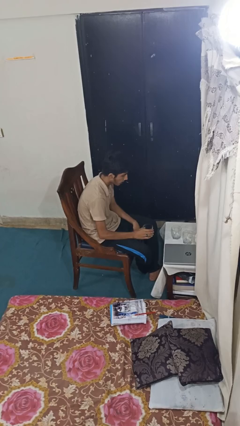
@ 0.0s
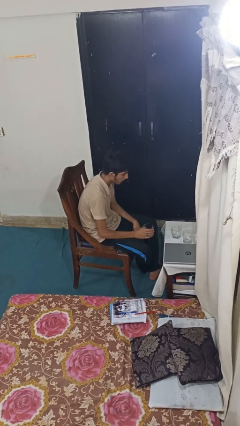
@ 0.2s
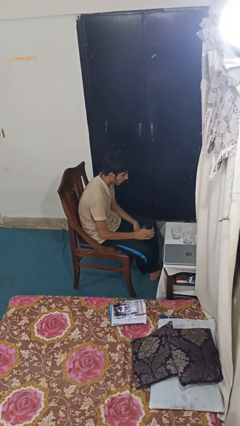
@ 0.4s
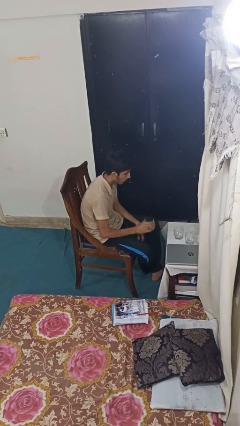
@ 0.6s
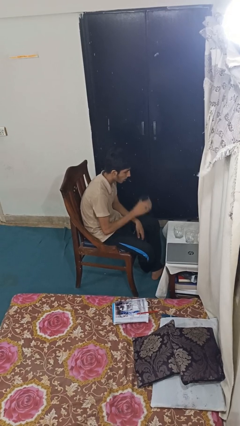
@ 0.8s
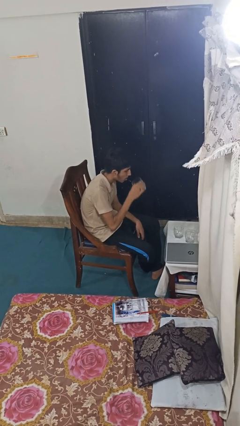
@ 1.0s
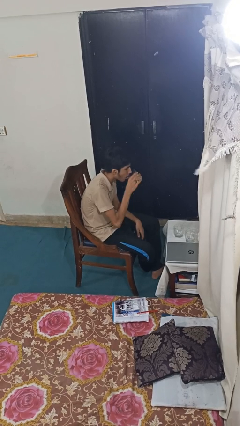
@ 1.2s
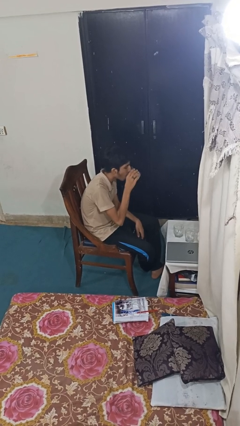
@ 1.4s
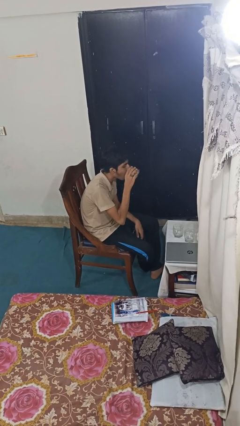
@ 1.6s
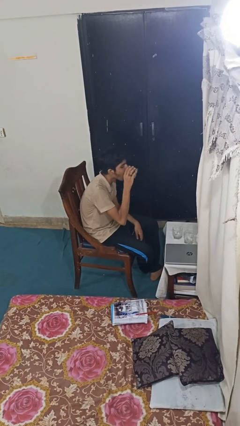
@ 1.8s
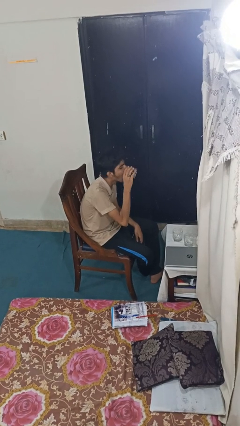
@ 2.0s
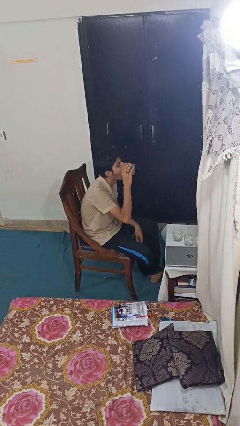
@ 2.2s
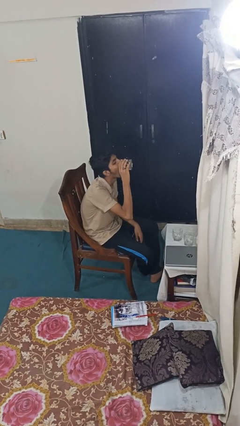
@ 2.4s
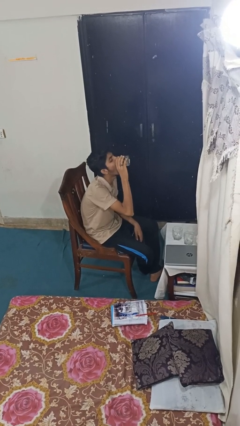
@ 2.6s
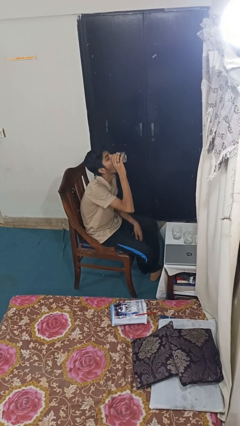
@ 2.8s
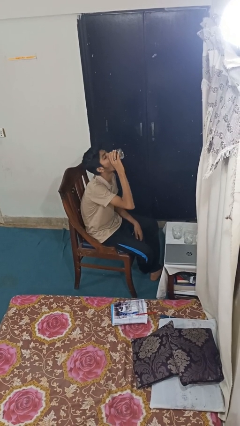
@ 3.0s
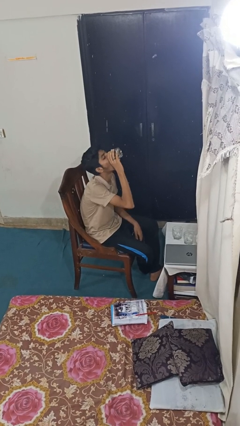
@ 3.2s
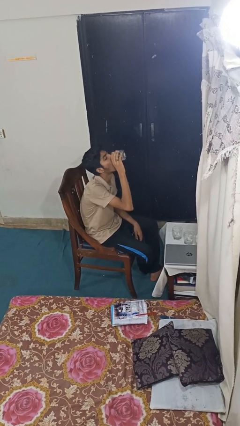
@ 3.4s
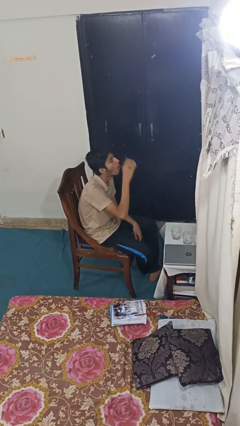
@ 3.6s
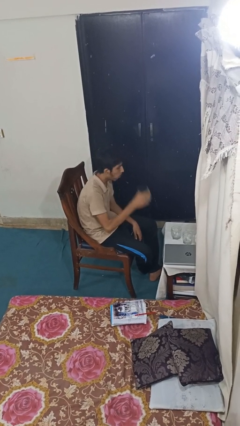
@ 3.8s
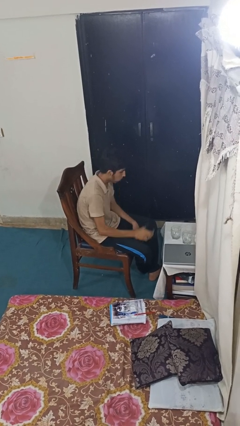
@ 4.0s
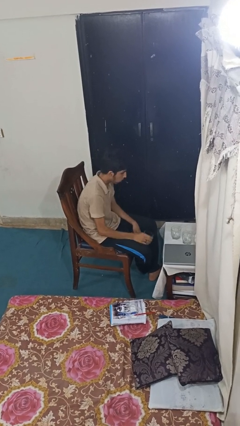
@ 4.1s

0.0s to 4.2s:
person drinks from shotglass

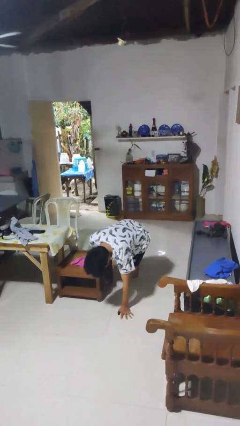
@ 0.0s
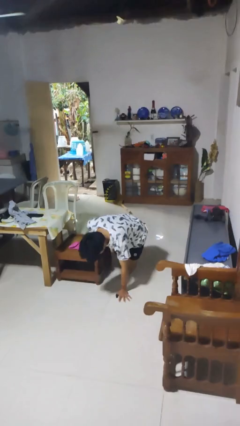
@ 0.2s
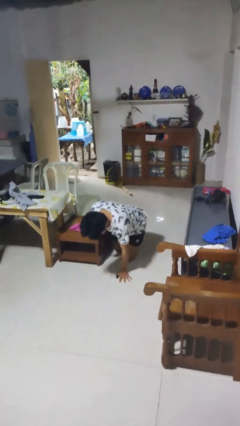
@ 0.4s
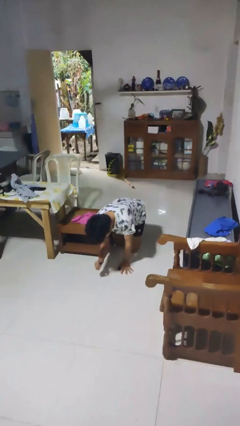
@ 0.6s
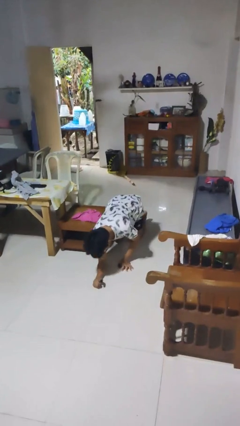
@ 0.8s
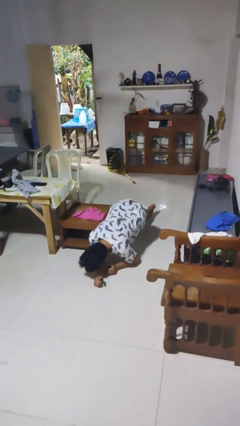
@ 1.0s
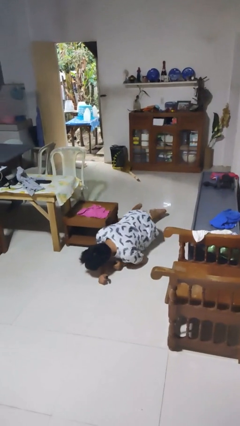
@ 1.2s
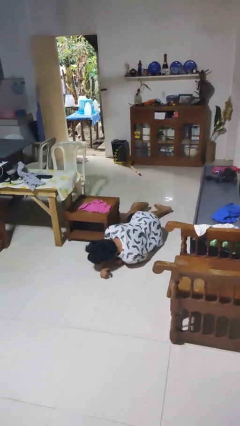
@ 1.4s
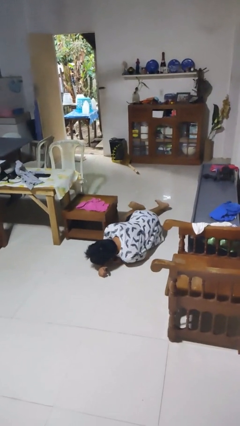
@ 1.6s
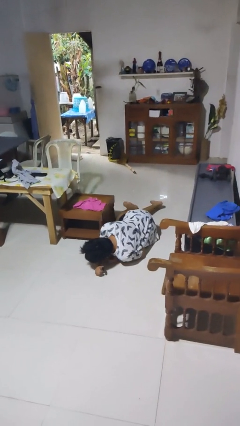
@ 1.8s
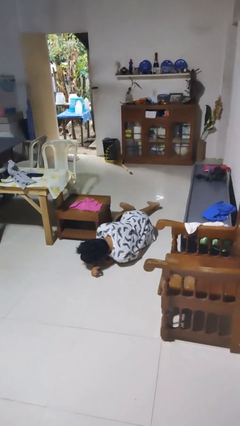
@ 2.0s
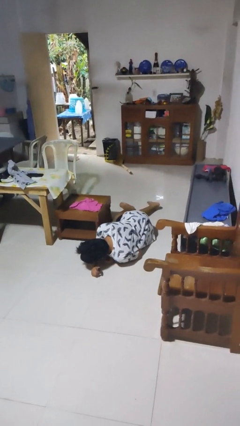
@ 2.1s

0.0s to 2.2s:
person lies down on floor

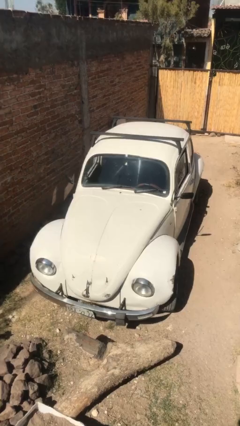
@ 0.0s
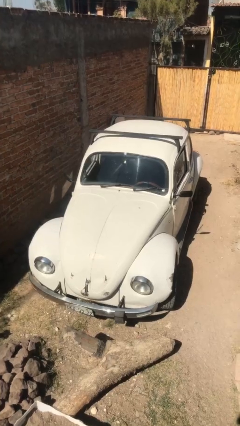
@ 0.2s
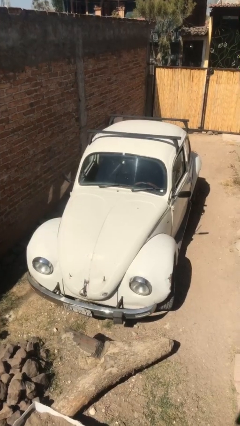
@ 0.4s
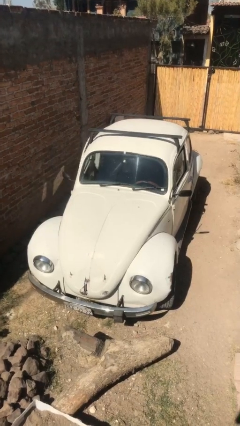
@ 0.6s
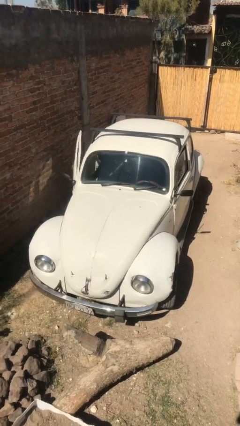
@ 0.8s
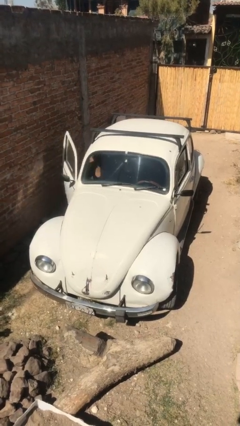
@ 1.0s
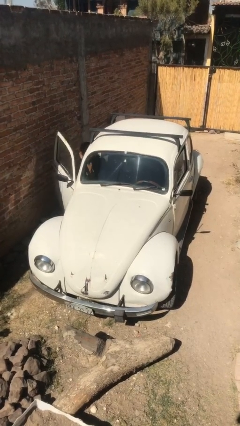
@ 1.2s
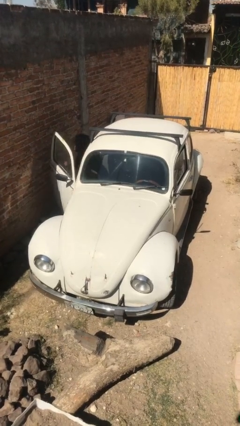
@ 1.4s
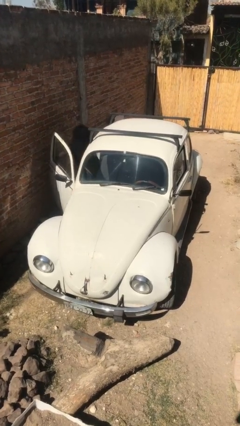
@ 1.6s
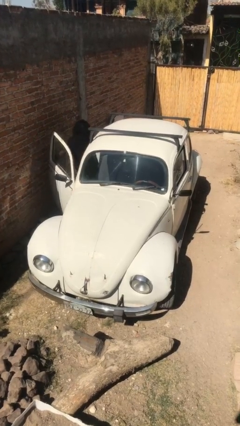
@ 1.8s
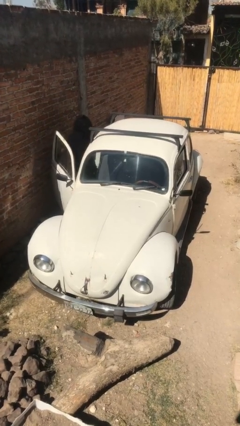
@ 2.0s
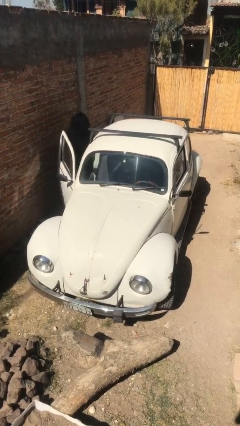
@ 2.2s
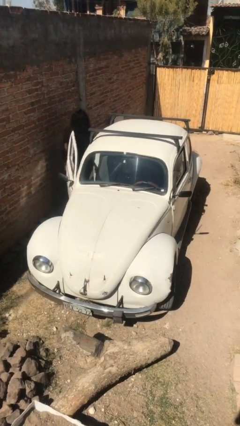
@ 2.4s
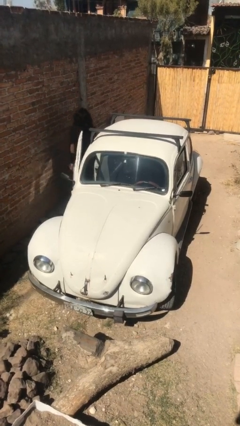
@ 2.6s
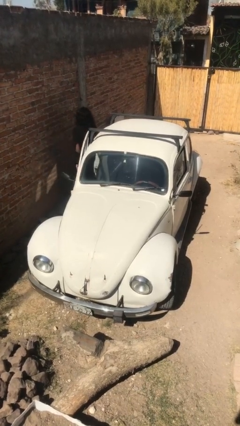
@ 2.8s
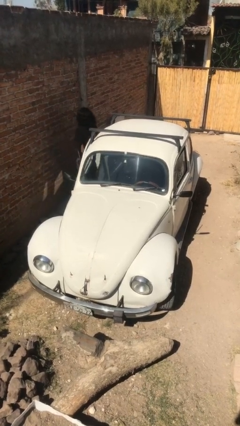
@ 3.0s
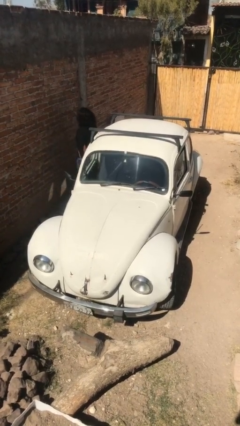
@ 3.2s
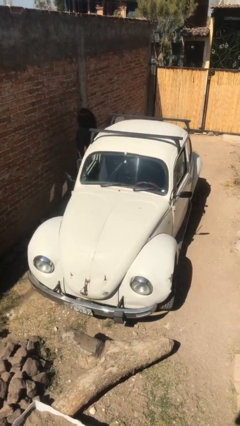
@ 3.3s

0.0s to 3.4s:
car drops off person

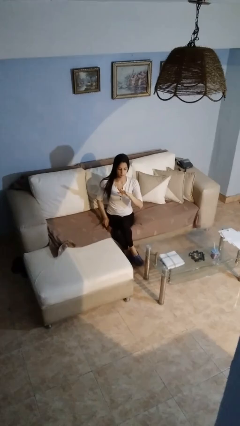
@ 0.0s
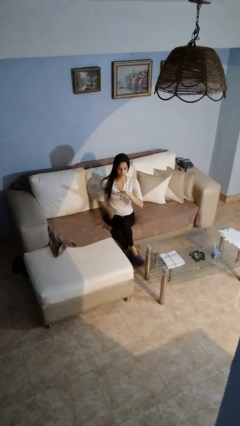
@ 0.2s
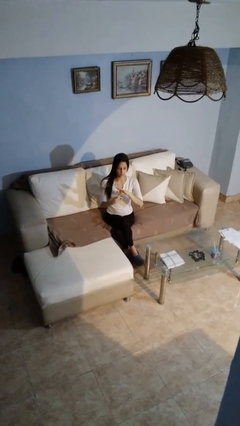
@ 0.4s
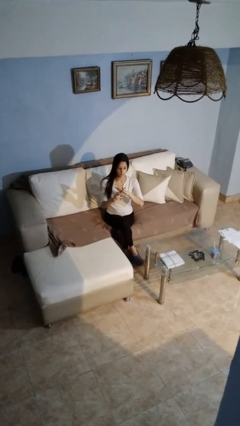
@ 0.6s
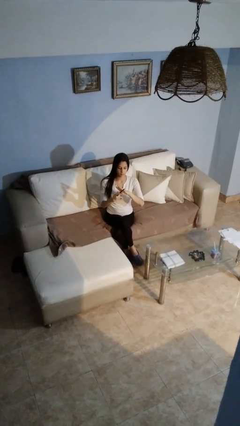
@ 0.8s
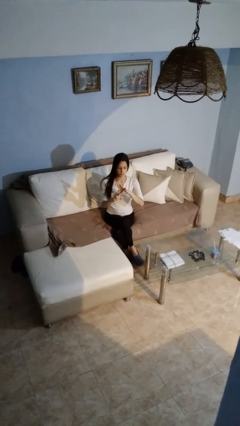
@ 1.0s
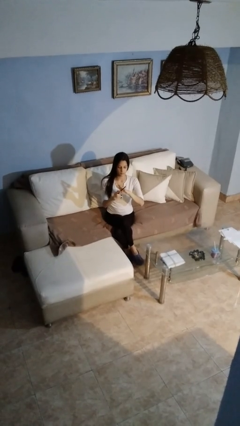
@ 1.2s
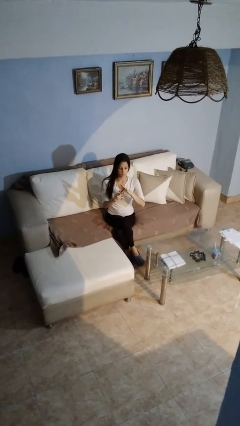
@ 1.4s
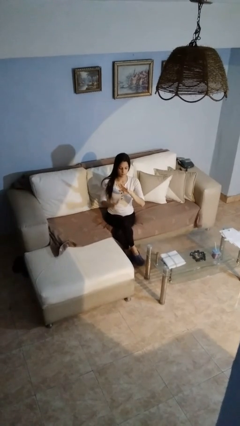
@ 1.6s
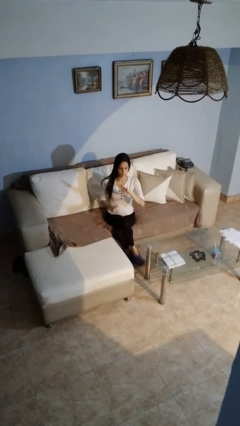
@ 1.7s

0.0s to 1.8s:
person files fingernails

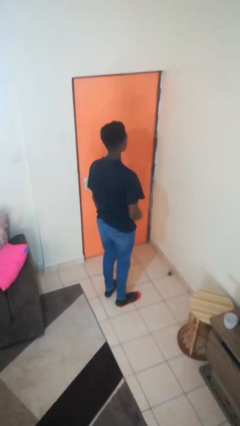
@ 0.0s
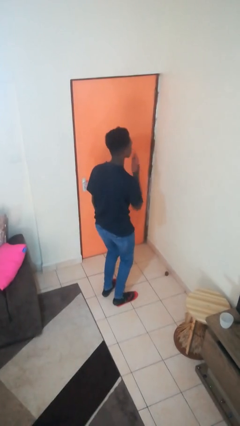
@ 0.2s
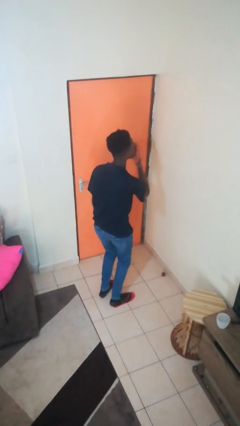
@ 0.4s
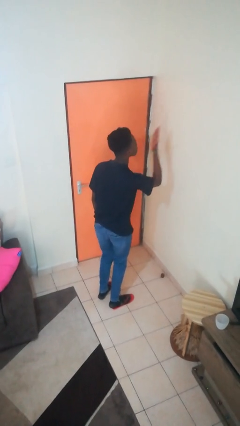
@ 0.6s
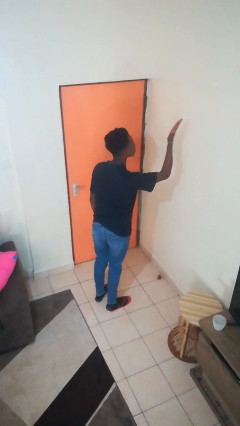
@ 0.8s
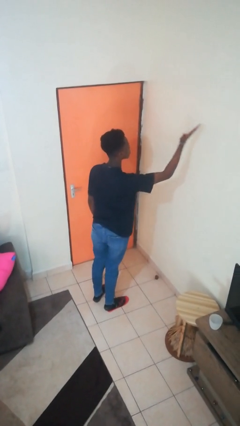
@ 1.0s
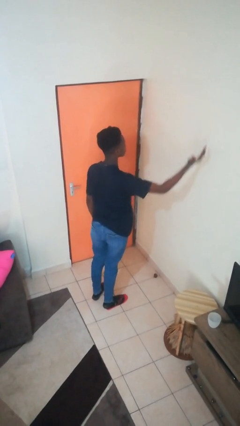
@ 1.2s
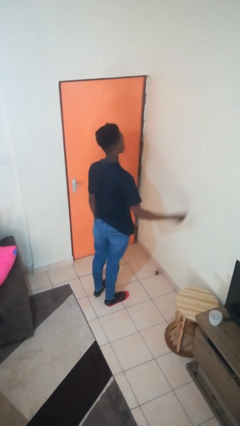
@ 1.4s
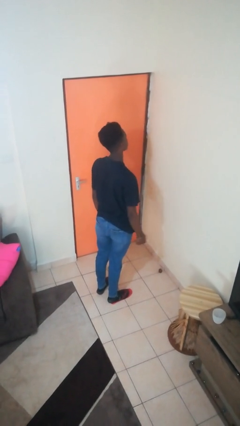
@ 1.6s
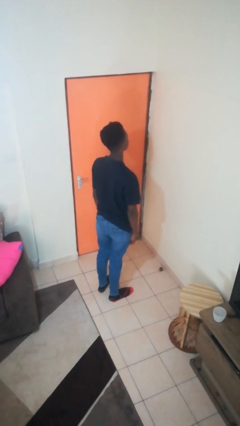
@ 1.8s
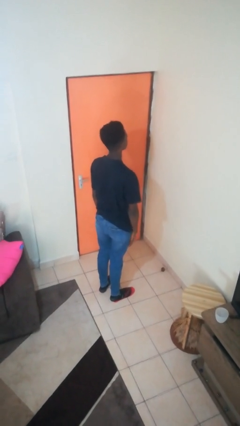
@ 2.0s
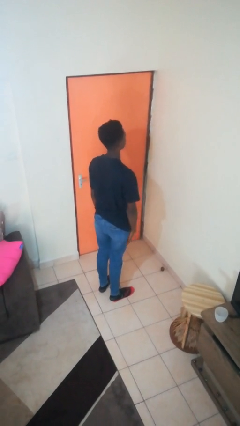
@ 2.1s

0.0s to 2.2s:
person gestures blow kiss

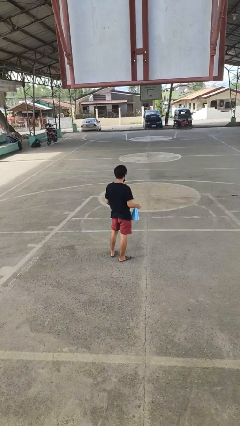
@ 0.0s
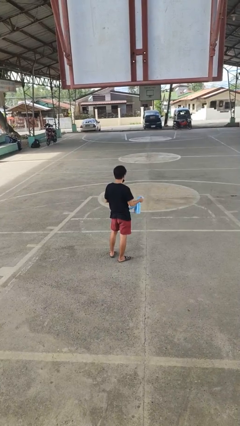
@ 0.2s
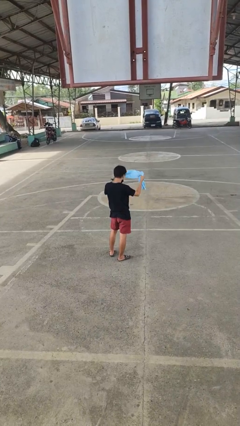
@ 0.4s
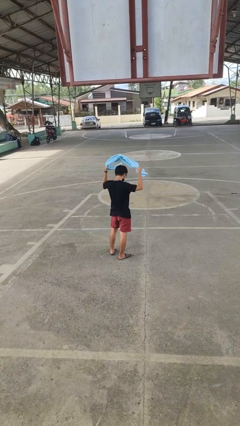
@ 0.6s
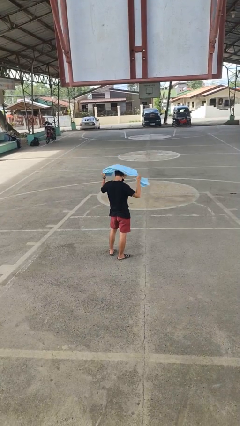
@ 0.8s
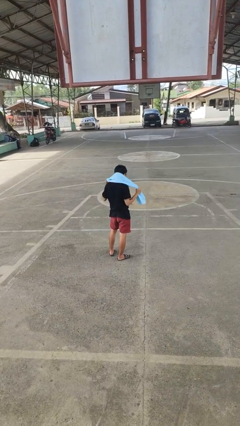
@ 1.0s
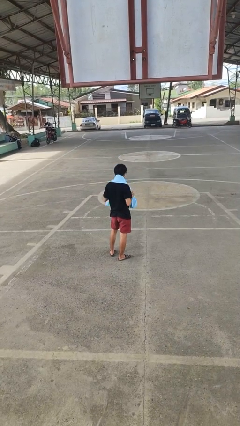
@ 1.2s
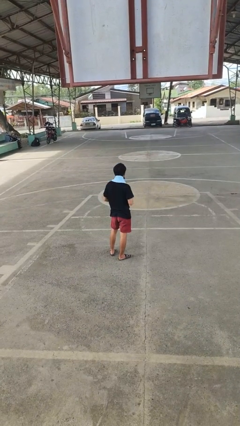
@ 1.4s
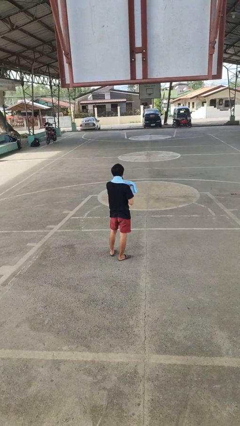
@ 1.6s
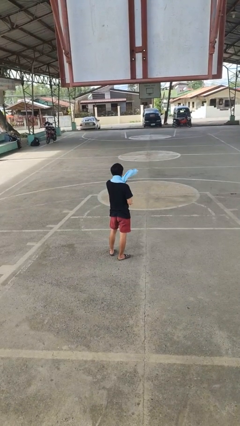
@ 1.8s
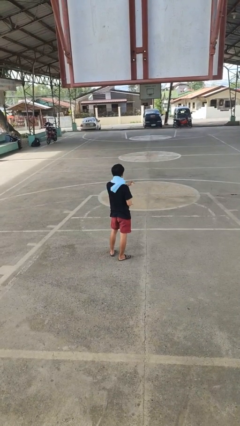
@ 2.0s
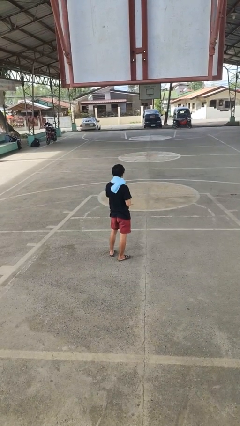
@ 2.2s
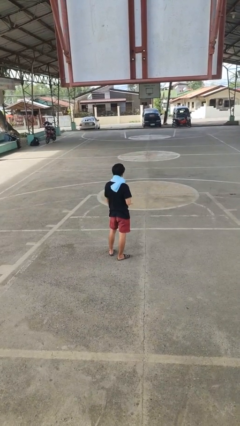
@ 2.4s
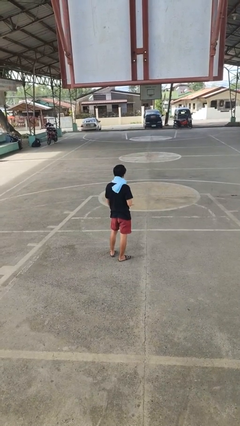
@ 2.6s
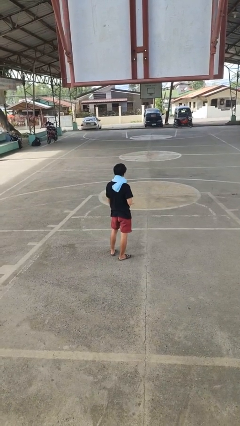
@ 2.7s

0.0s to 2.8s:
person puts on scarf

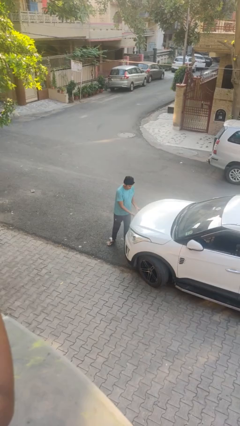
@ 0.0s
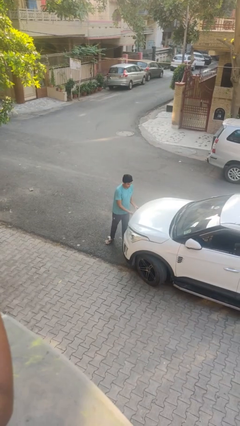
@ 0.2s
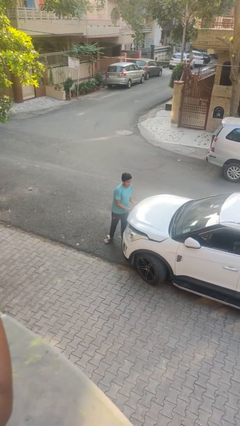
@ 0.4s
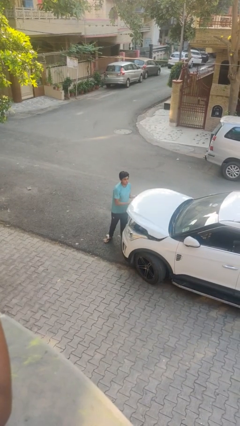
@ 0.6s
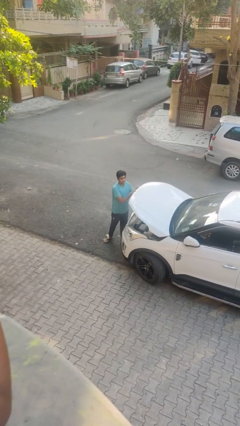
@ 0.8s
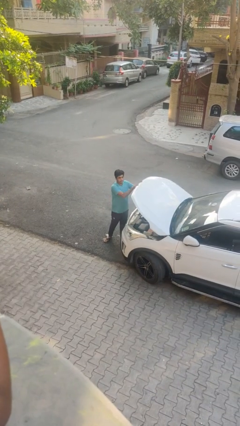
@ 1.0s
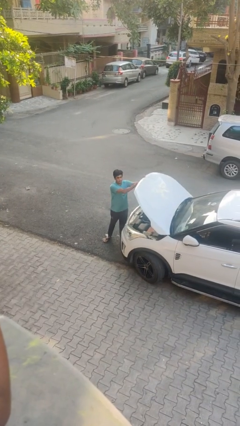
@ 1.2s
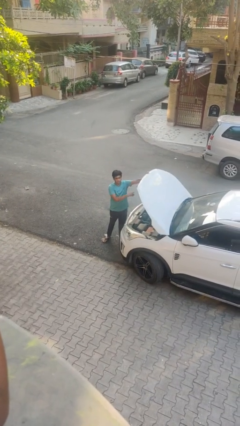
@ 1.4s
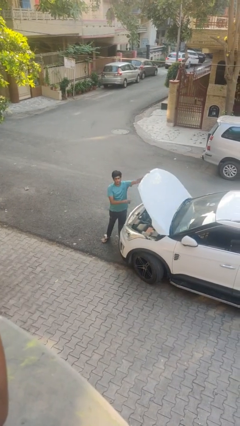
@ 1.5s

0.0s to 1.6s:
person opens car hood
